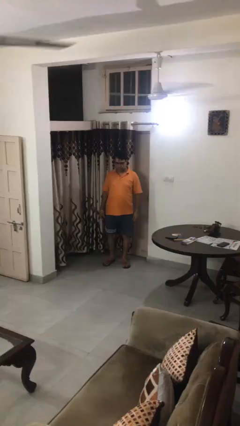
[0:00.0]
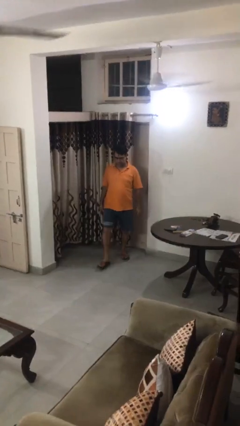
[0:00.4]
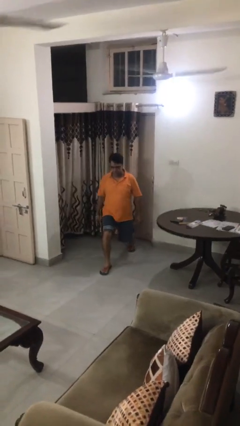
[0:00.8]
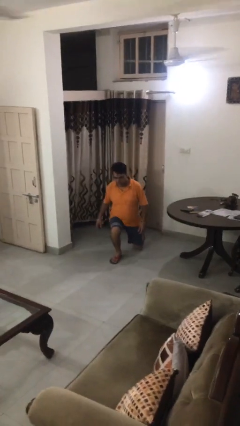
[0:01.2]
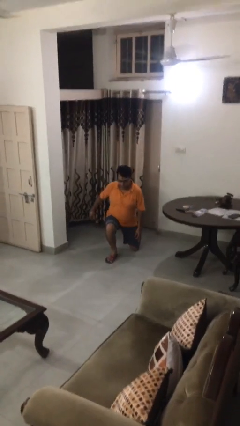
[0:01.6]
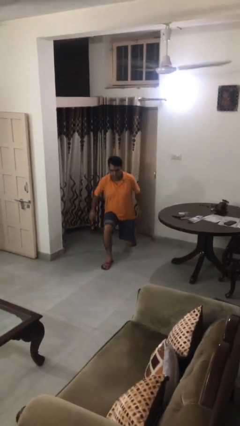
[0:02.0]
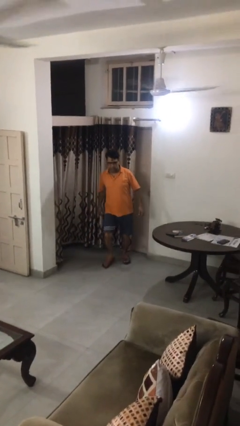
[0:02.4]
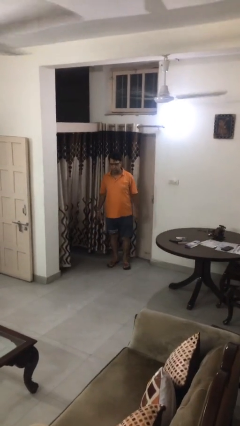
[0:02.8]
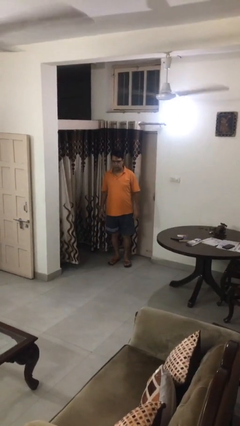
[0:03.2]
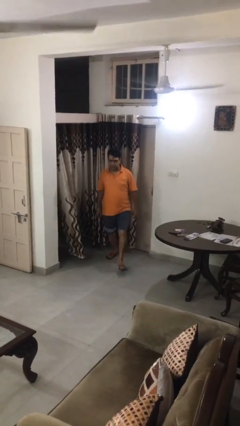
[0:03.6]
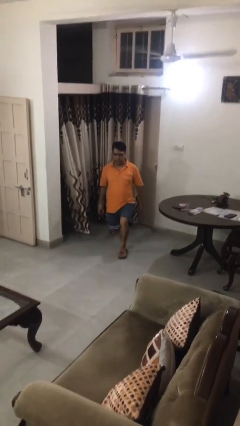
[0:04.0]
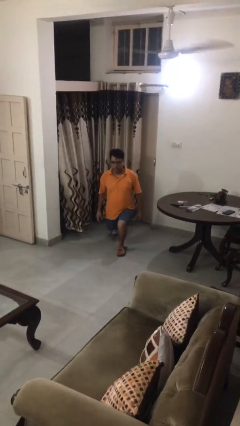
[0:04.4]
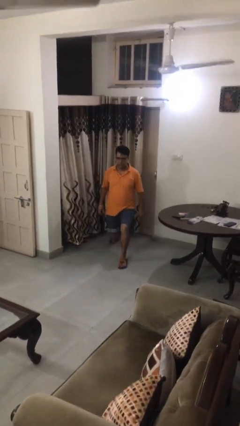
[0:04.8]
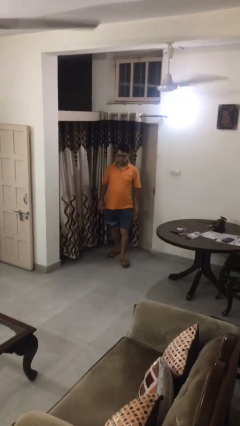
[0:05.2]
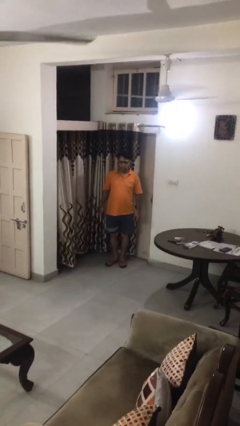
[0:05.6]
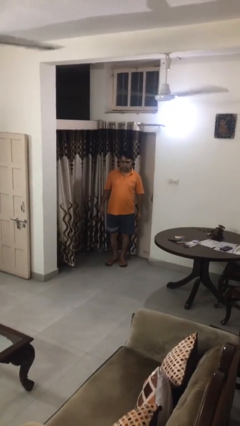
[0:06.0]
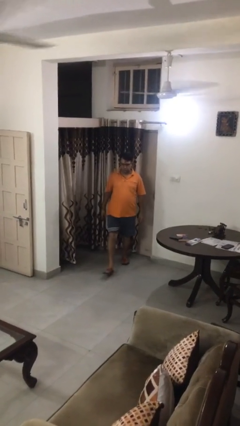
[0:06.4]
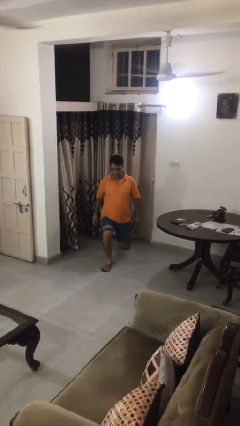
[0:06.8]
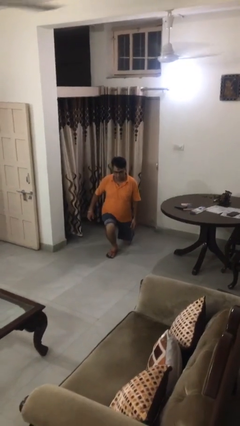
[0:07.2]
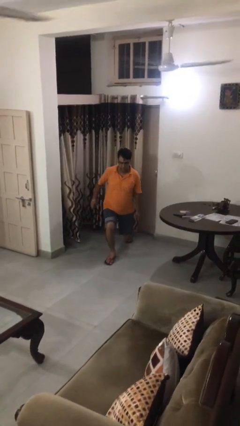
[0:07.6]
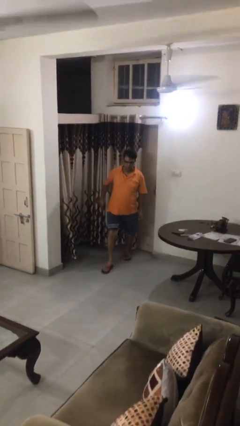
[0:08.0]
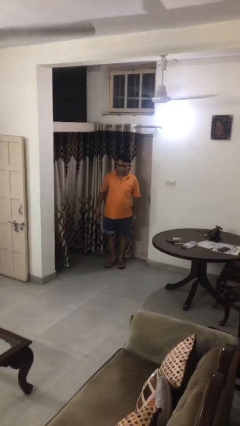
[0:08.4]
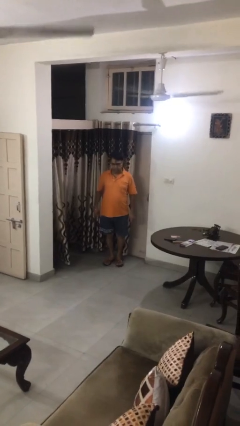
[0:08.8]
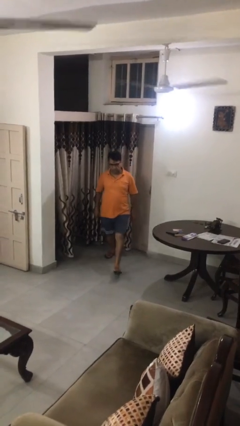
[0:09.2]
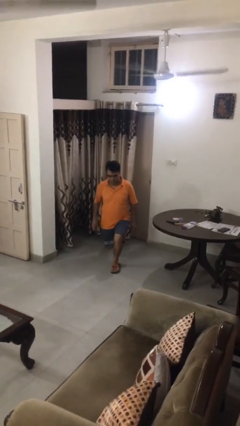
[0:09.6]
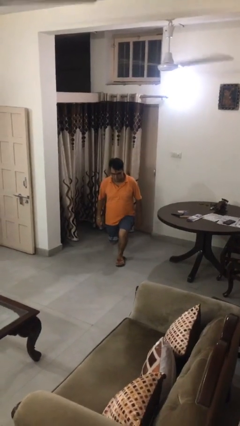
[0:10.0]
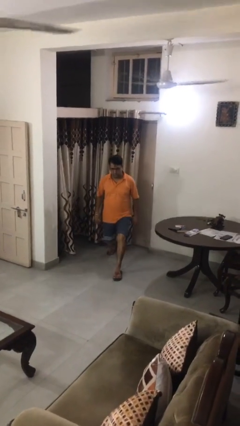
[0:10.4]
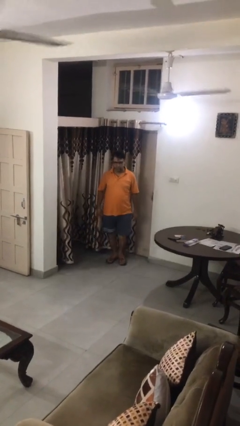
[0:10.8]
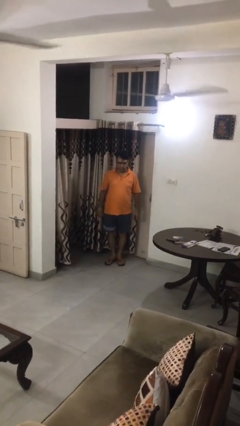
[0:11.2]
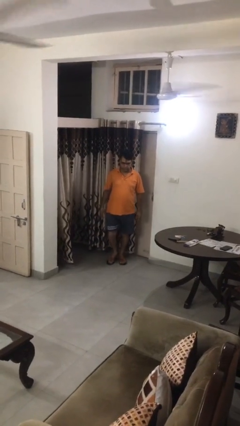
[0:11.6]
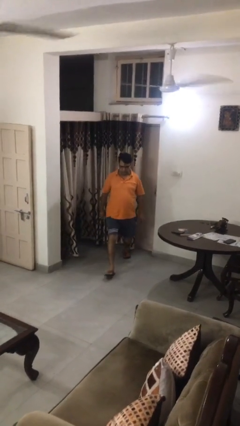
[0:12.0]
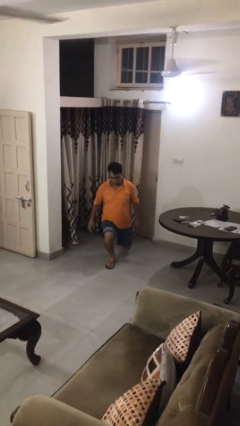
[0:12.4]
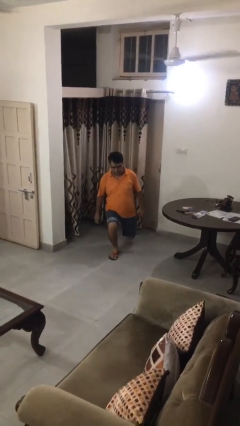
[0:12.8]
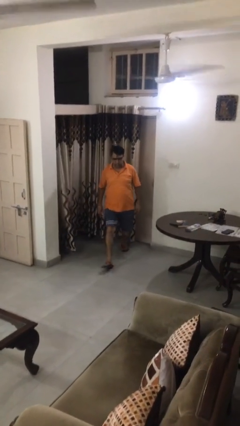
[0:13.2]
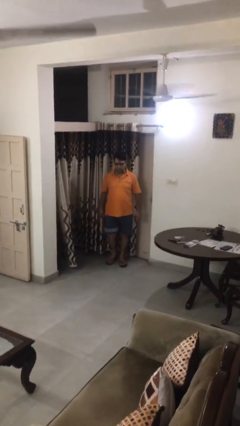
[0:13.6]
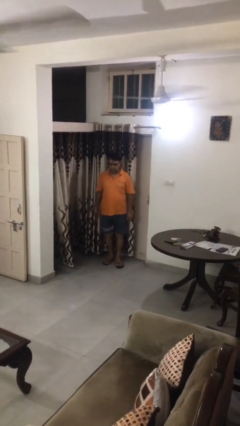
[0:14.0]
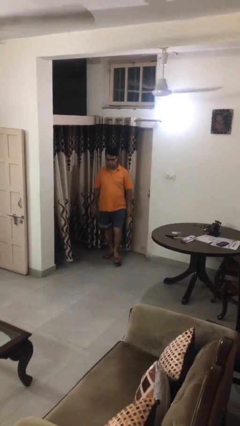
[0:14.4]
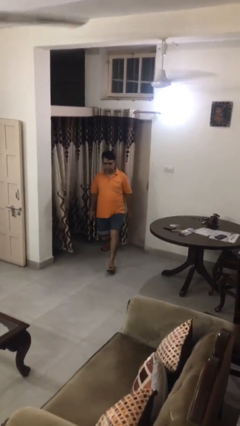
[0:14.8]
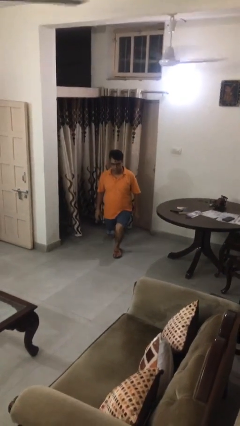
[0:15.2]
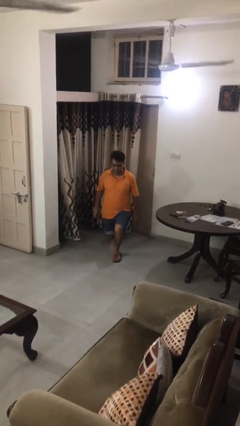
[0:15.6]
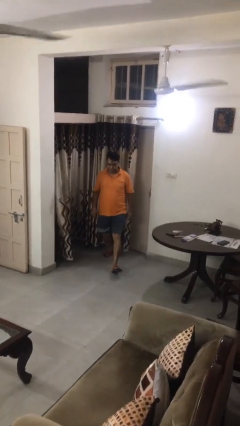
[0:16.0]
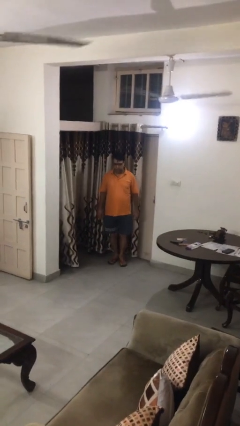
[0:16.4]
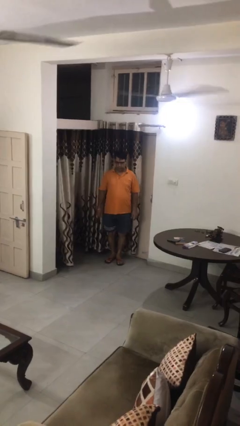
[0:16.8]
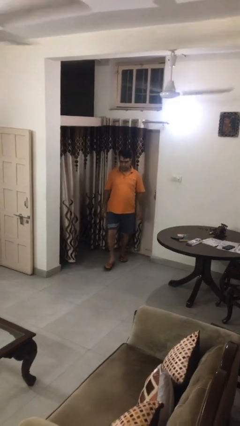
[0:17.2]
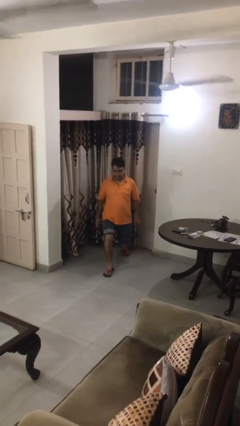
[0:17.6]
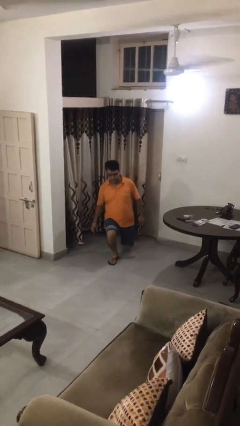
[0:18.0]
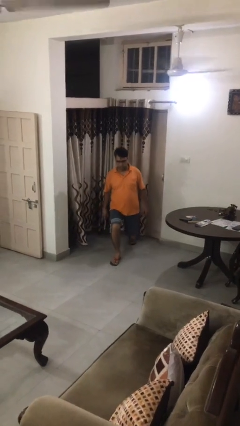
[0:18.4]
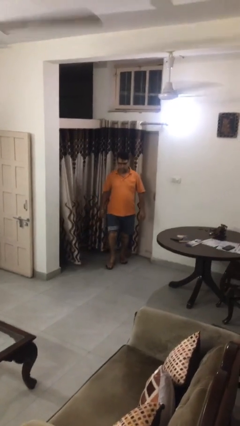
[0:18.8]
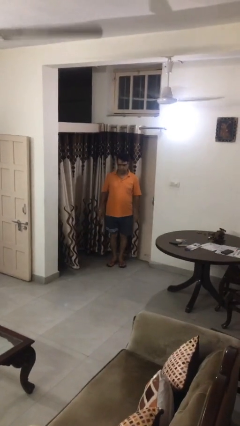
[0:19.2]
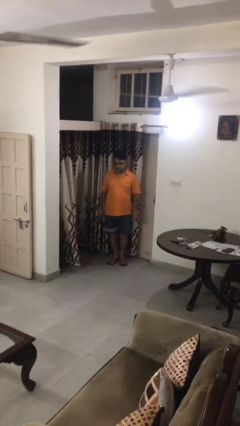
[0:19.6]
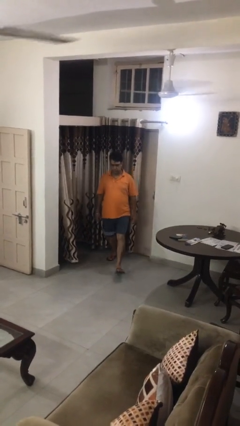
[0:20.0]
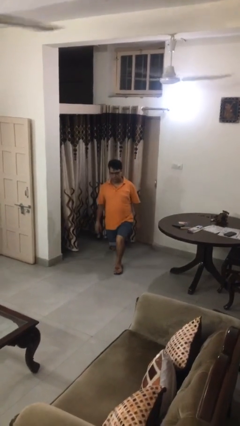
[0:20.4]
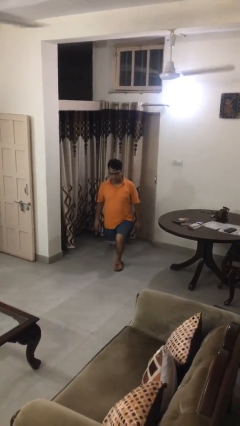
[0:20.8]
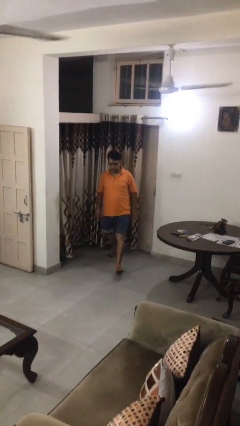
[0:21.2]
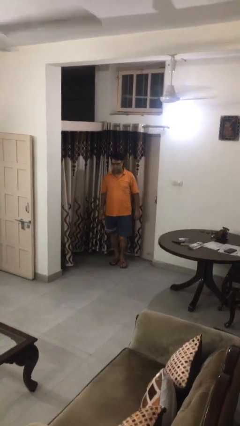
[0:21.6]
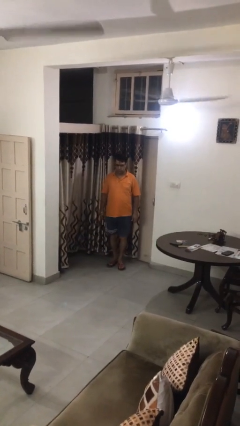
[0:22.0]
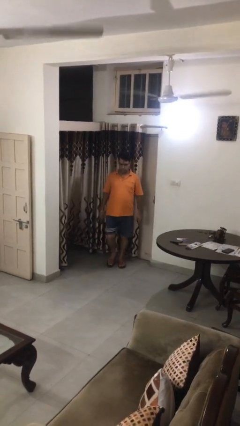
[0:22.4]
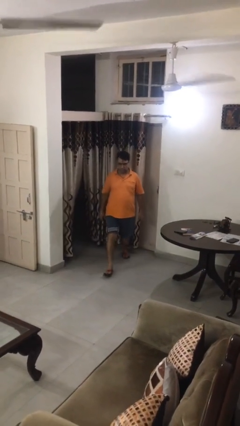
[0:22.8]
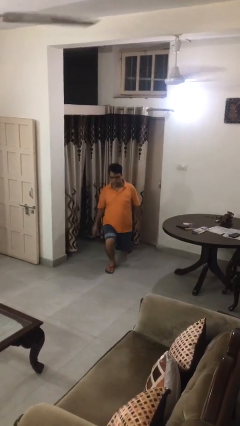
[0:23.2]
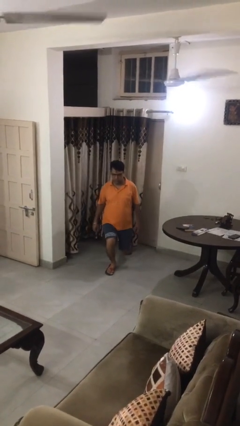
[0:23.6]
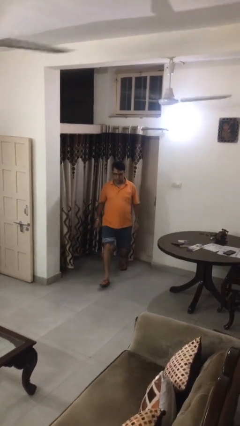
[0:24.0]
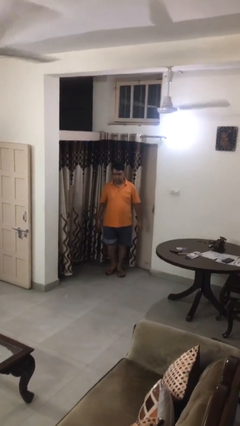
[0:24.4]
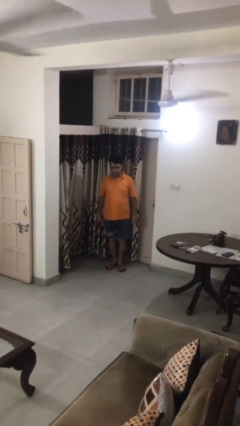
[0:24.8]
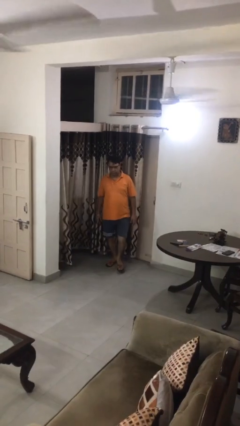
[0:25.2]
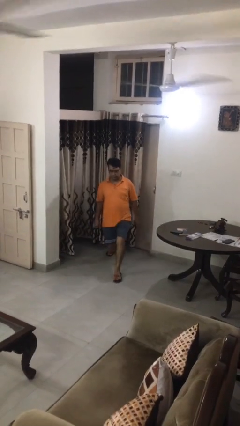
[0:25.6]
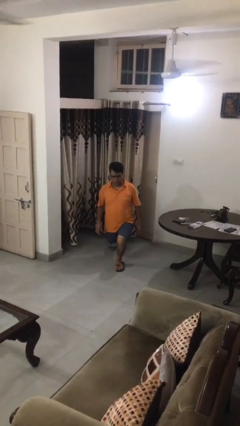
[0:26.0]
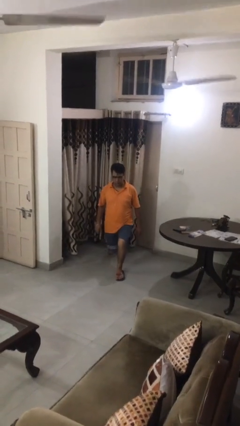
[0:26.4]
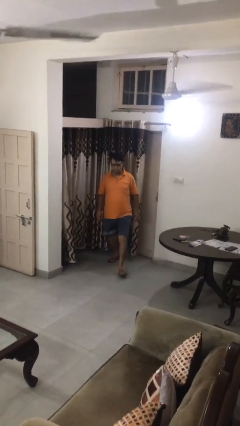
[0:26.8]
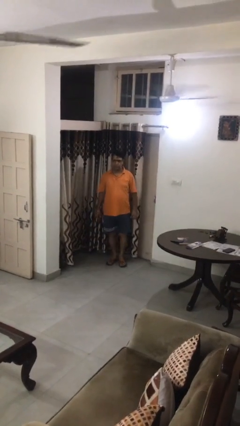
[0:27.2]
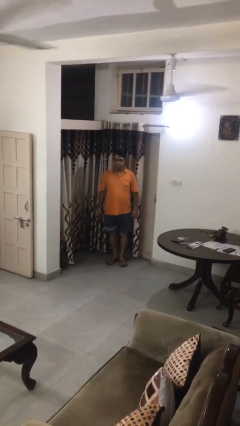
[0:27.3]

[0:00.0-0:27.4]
person exercises with lunges

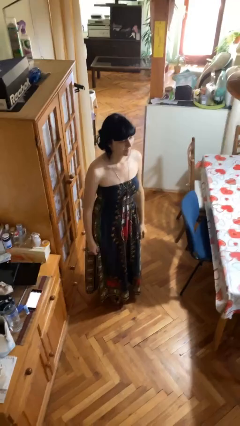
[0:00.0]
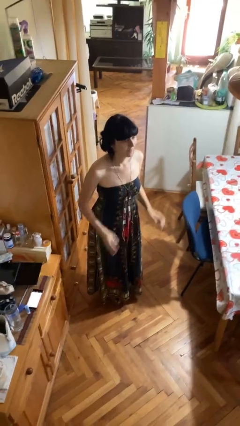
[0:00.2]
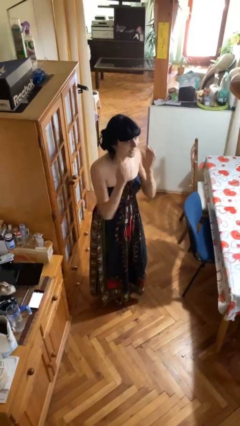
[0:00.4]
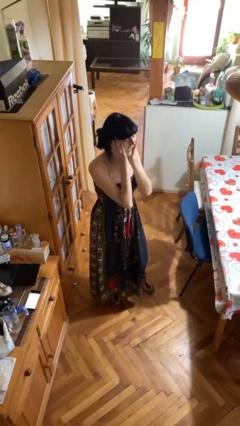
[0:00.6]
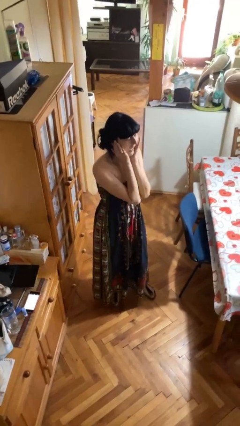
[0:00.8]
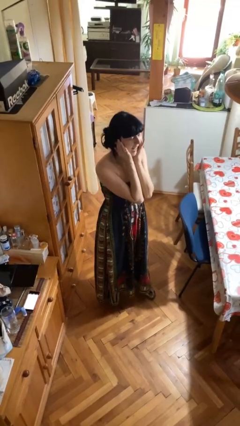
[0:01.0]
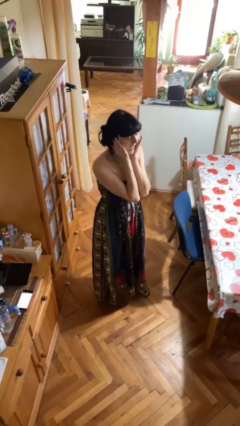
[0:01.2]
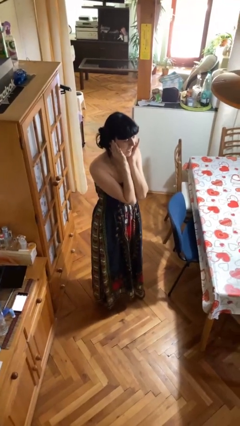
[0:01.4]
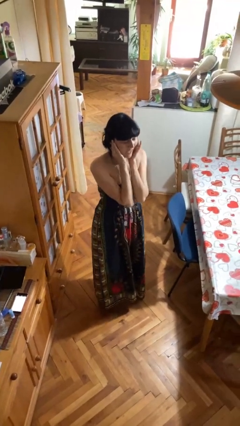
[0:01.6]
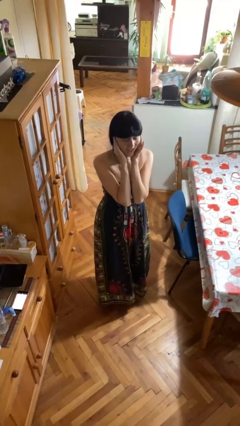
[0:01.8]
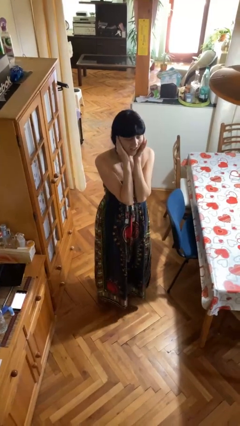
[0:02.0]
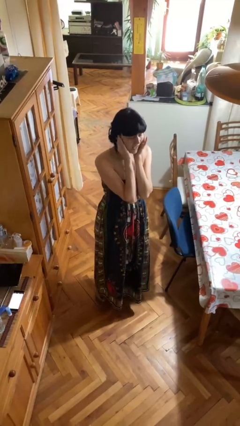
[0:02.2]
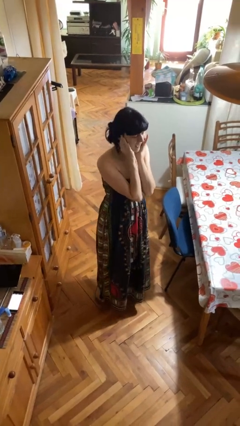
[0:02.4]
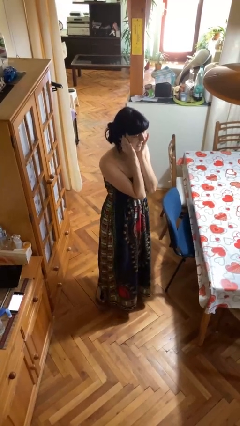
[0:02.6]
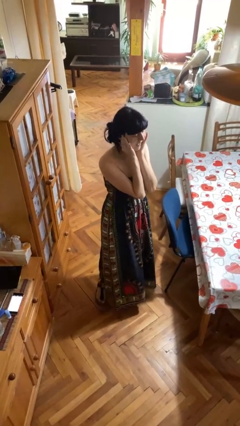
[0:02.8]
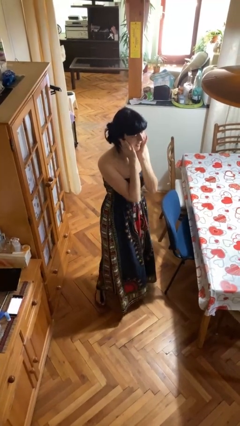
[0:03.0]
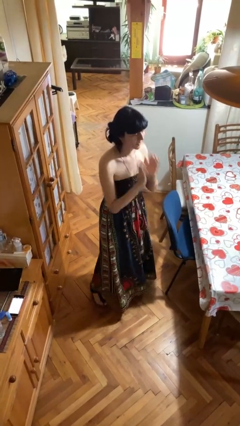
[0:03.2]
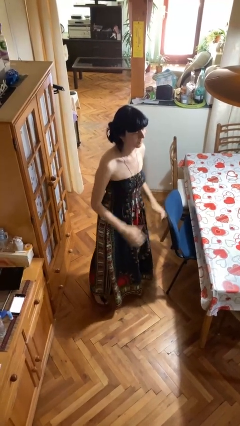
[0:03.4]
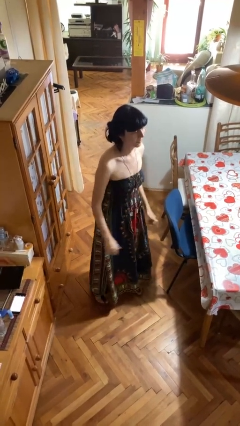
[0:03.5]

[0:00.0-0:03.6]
person puts fingers in ear

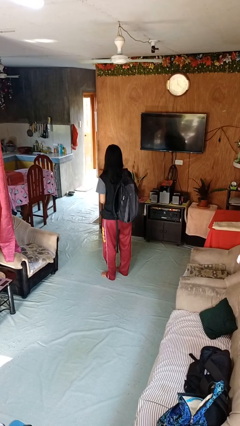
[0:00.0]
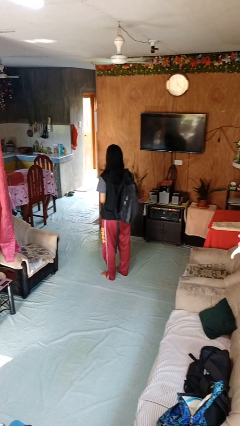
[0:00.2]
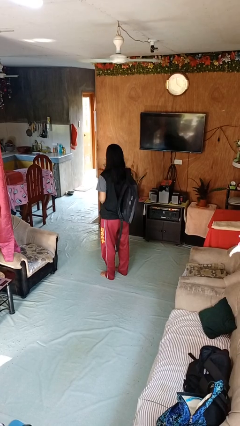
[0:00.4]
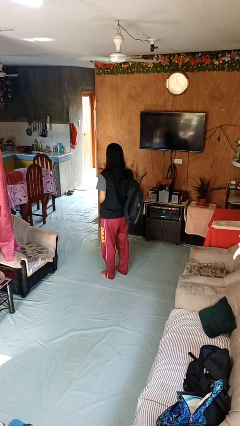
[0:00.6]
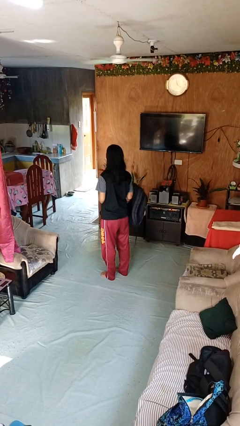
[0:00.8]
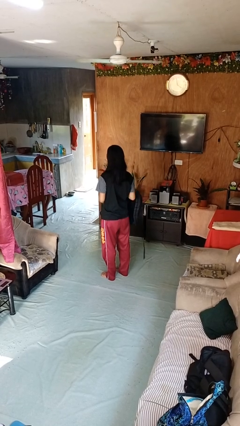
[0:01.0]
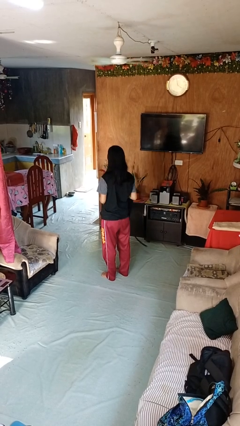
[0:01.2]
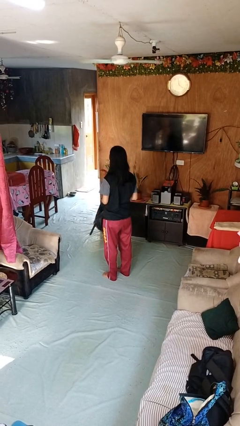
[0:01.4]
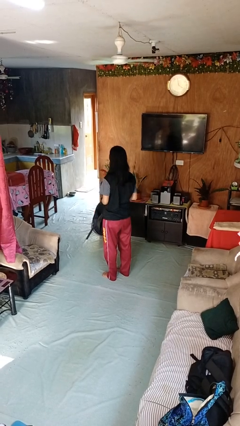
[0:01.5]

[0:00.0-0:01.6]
person takes off backpack
